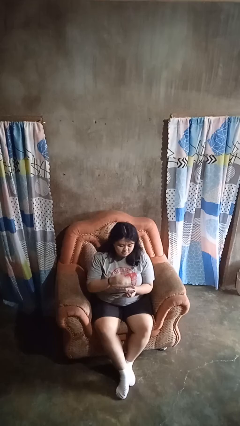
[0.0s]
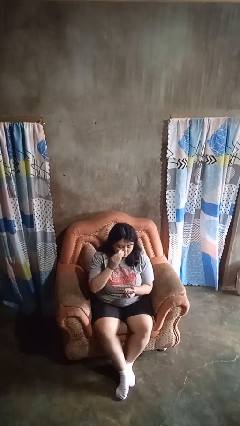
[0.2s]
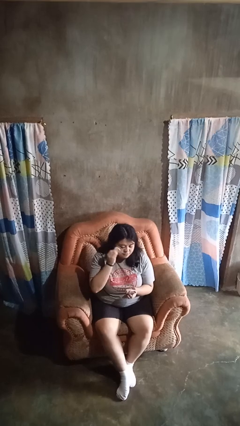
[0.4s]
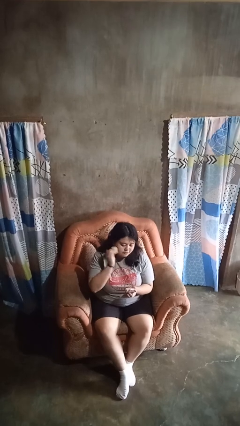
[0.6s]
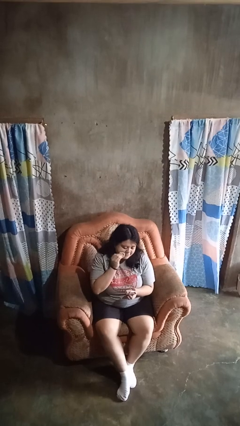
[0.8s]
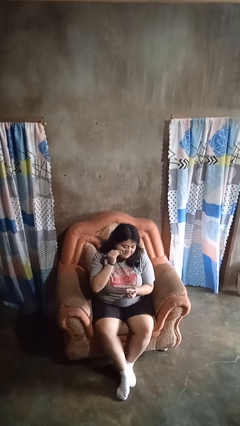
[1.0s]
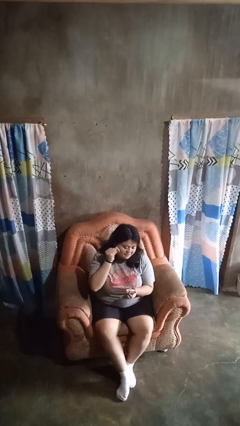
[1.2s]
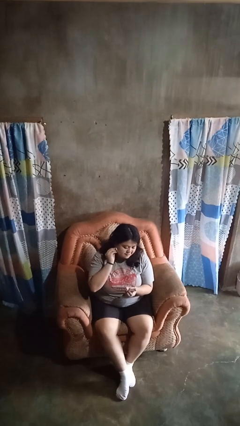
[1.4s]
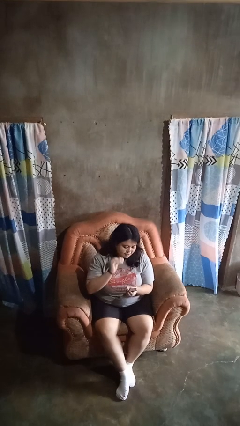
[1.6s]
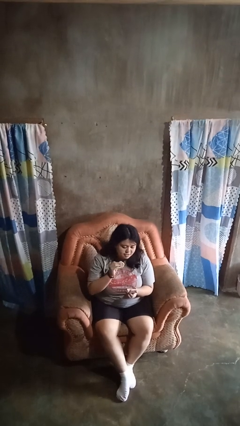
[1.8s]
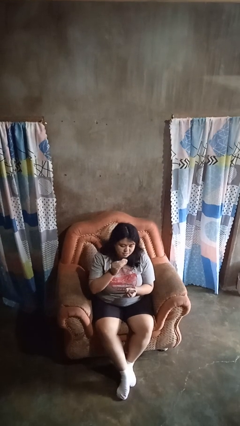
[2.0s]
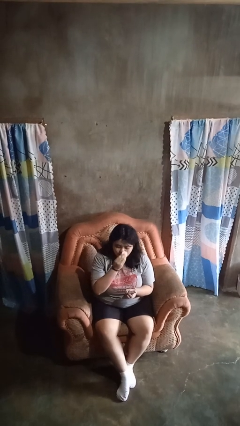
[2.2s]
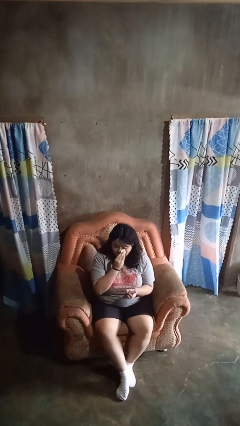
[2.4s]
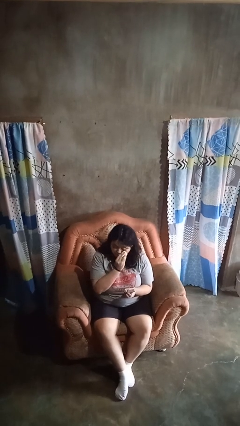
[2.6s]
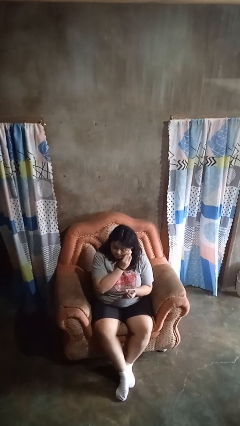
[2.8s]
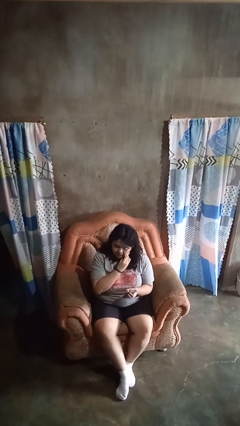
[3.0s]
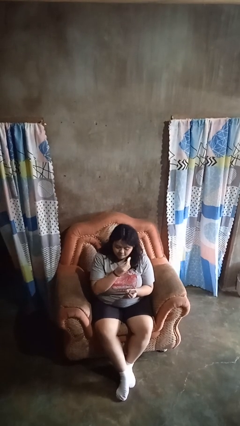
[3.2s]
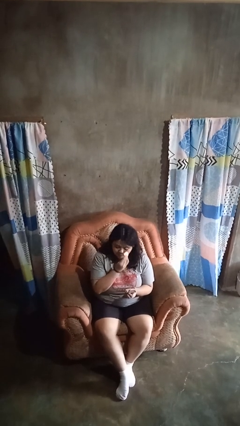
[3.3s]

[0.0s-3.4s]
person applies foundation makeup

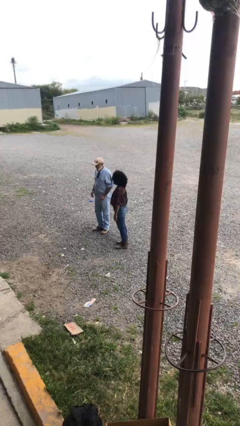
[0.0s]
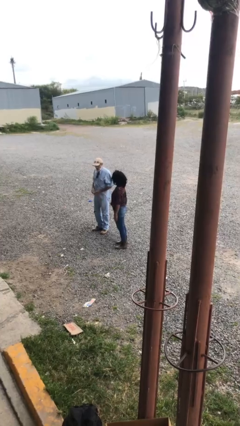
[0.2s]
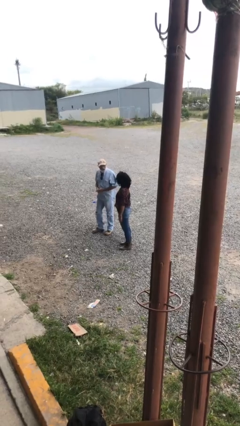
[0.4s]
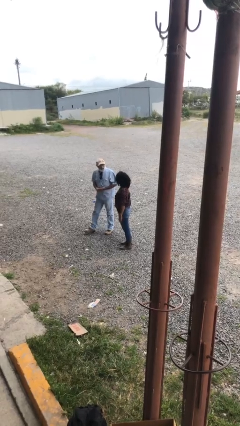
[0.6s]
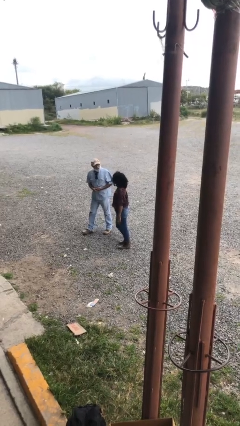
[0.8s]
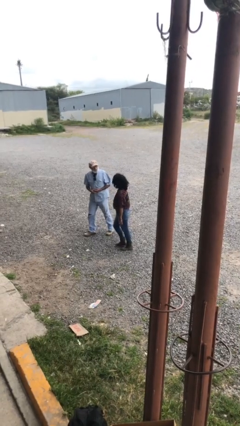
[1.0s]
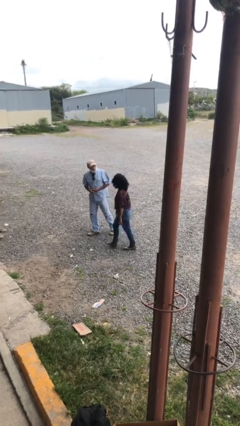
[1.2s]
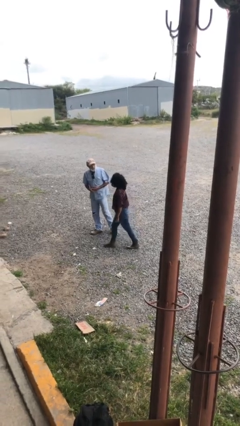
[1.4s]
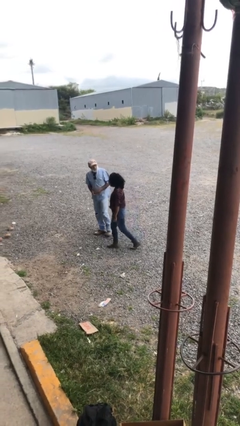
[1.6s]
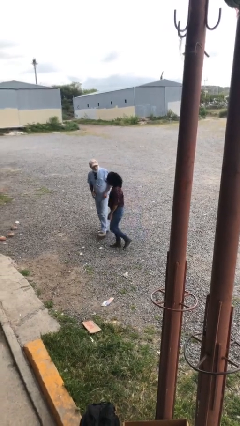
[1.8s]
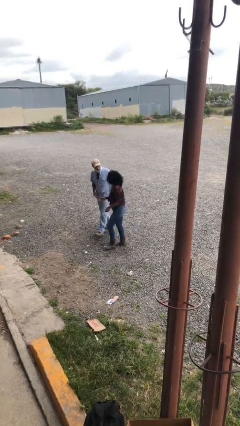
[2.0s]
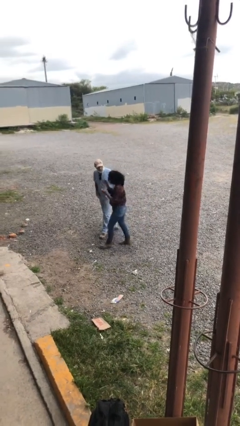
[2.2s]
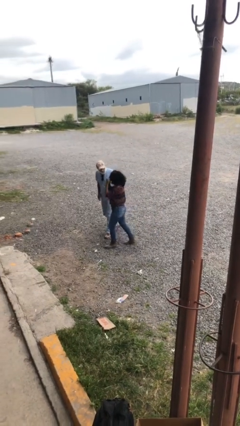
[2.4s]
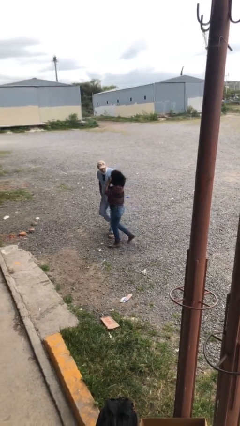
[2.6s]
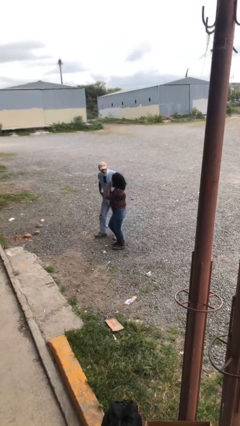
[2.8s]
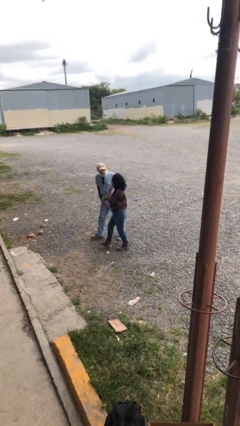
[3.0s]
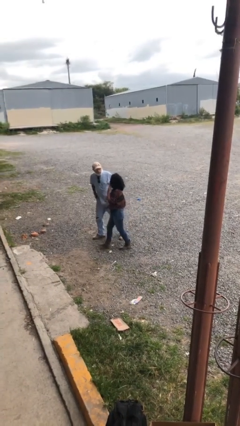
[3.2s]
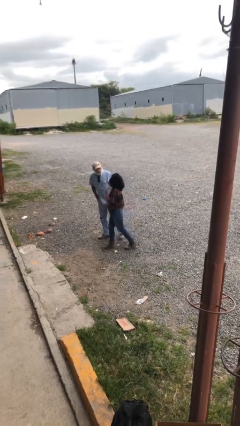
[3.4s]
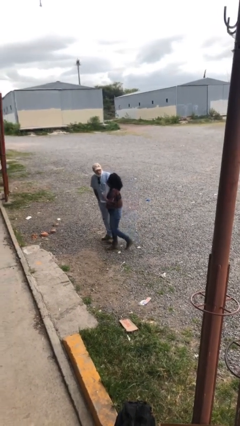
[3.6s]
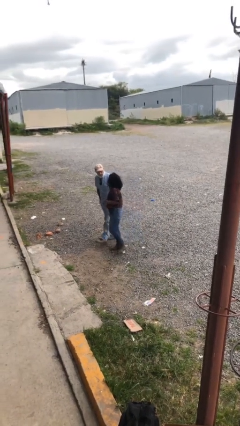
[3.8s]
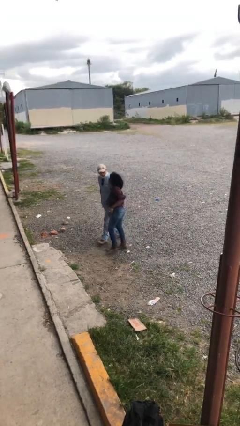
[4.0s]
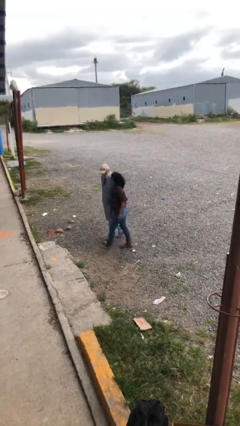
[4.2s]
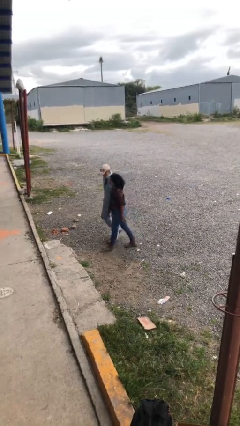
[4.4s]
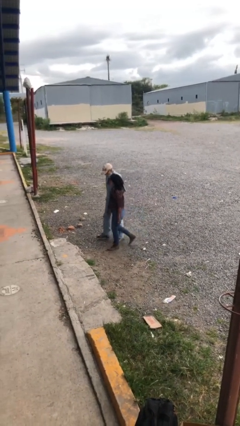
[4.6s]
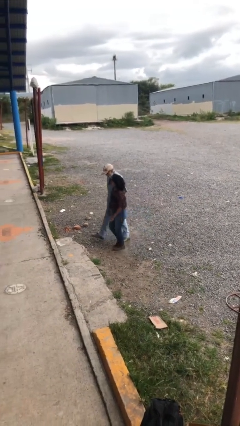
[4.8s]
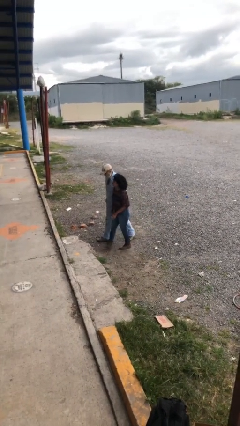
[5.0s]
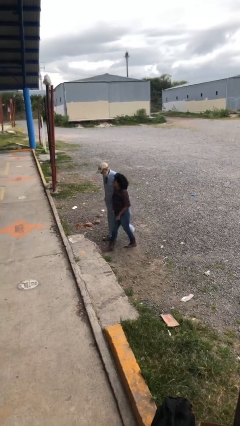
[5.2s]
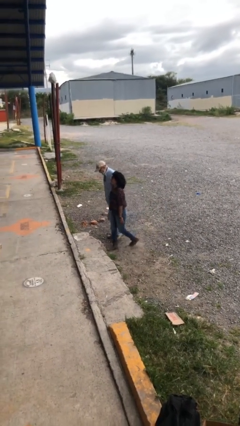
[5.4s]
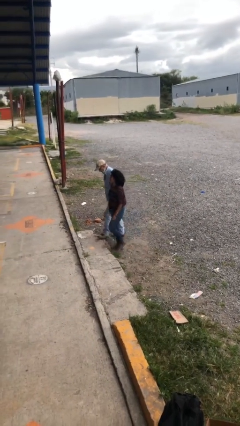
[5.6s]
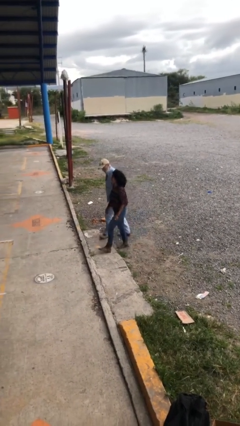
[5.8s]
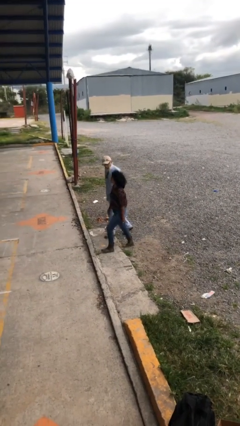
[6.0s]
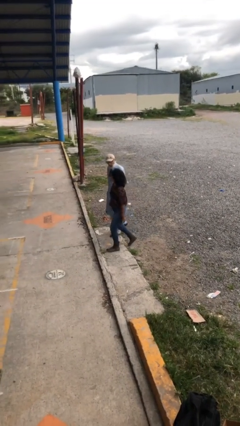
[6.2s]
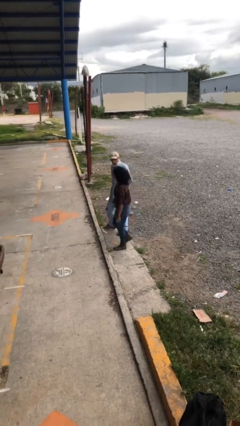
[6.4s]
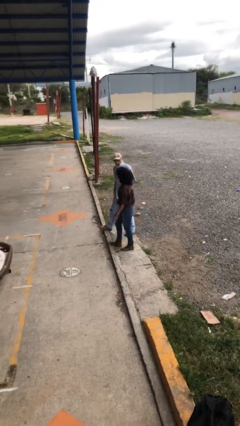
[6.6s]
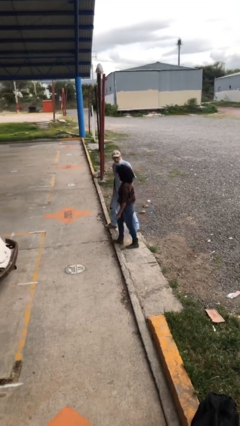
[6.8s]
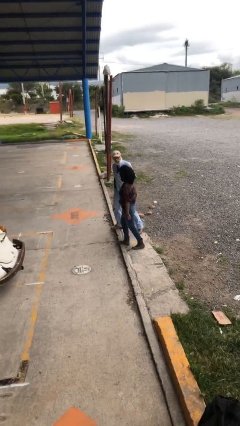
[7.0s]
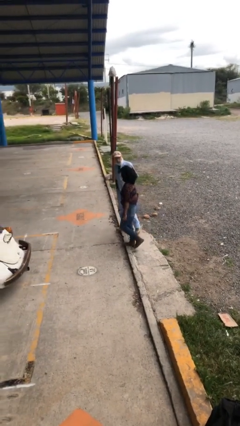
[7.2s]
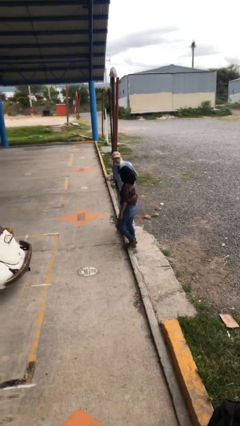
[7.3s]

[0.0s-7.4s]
person talks to person

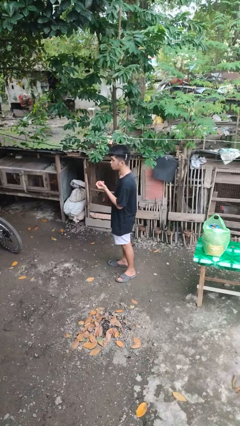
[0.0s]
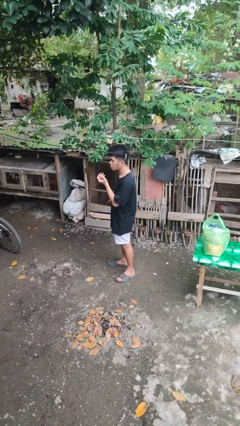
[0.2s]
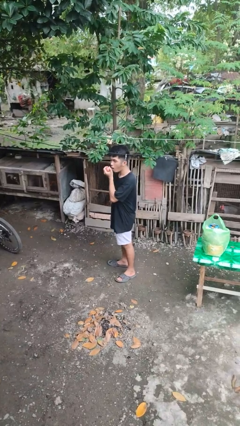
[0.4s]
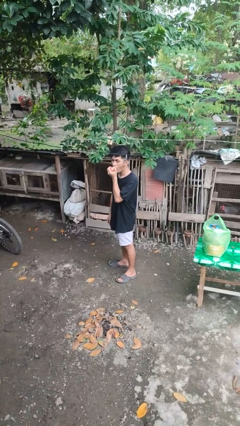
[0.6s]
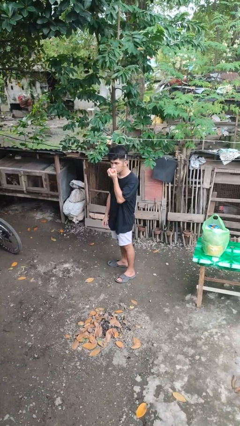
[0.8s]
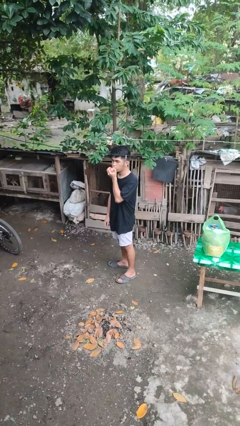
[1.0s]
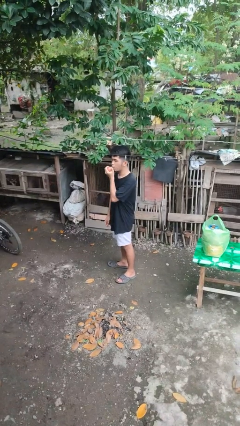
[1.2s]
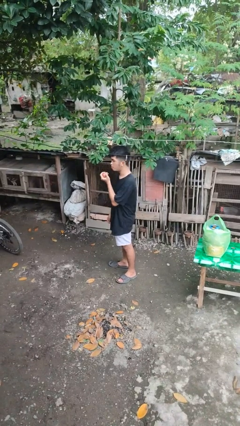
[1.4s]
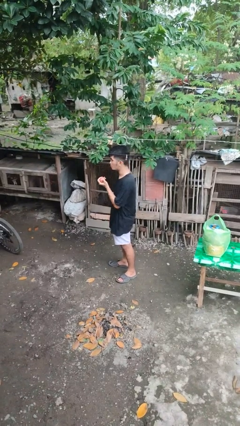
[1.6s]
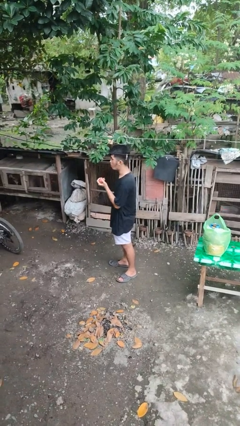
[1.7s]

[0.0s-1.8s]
person eats apple

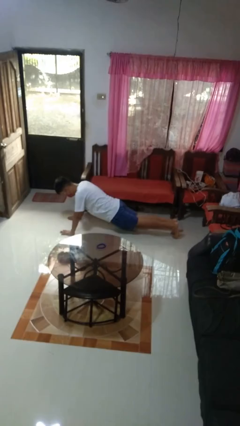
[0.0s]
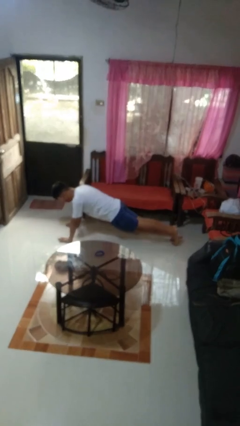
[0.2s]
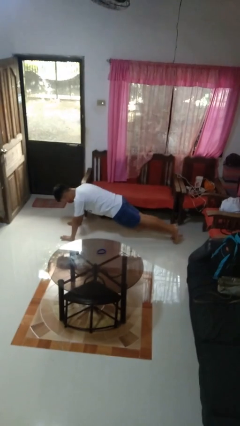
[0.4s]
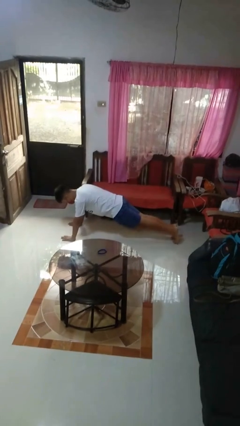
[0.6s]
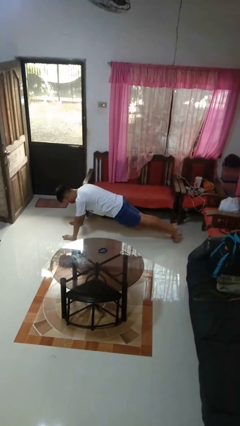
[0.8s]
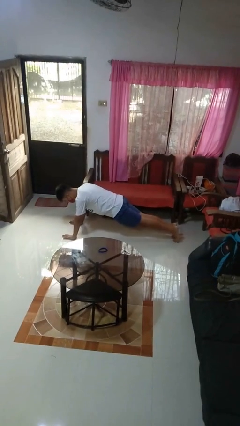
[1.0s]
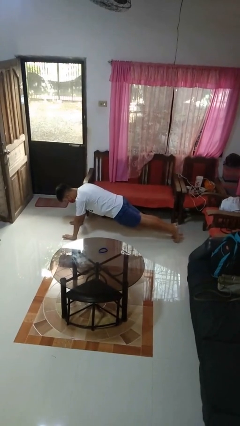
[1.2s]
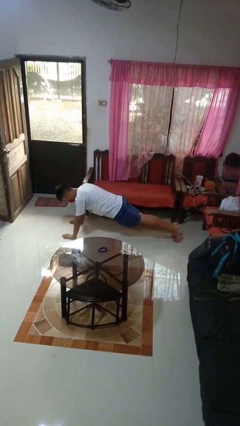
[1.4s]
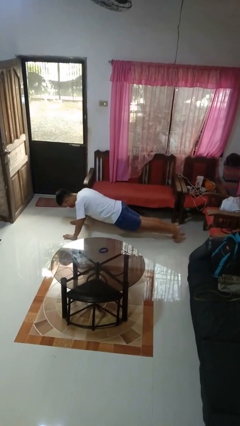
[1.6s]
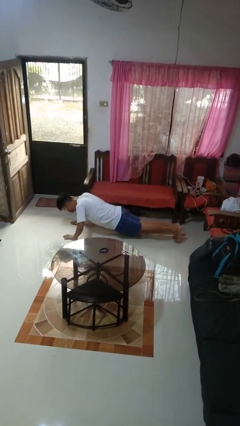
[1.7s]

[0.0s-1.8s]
person exercises with pushup

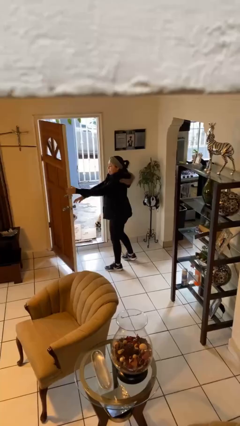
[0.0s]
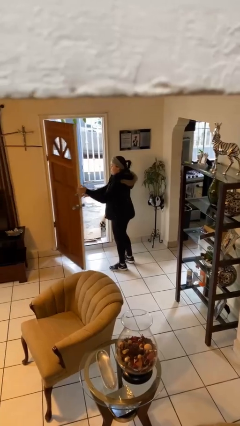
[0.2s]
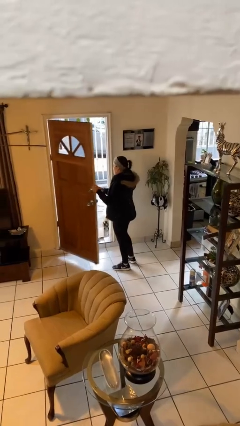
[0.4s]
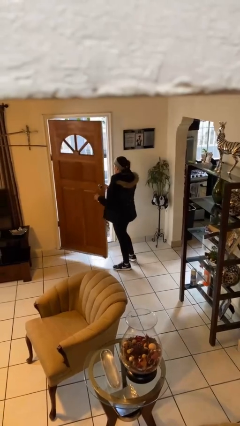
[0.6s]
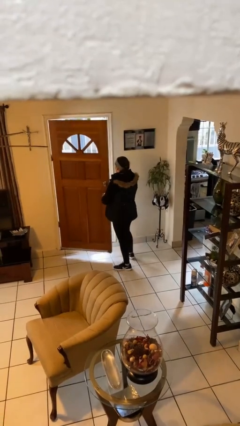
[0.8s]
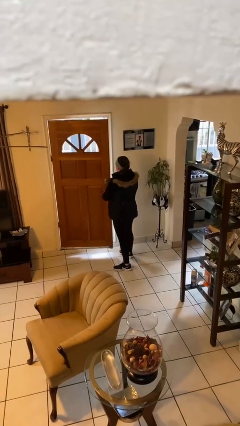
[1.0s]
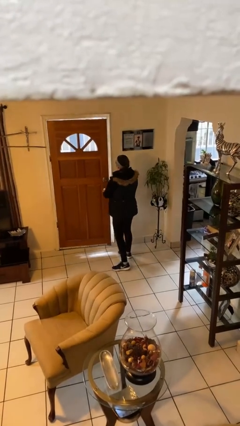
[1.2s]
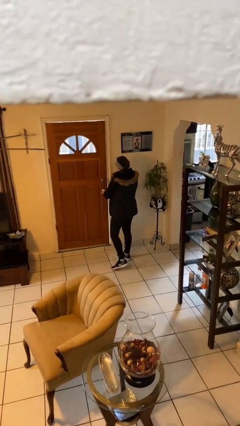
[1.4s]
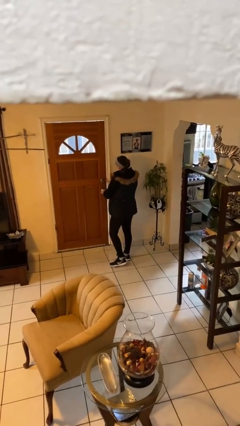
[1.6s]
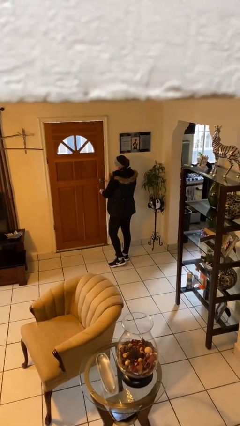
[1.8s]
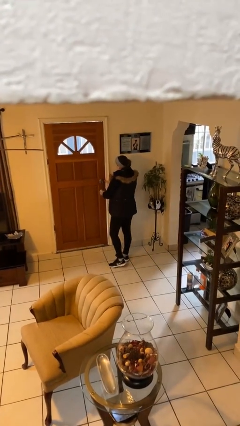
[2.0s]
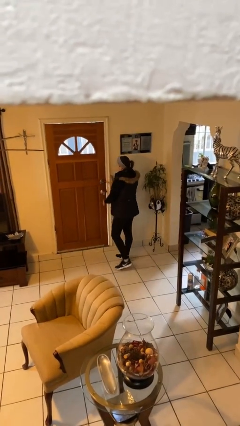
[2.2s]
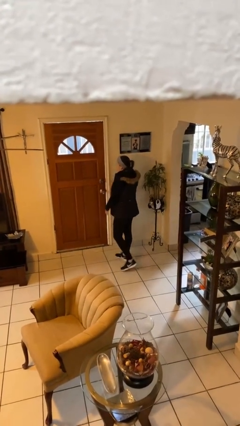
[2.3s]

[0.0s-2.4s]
person closes facility door

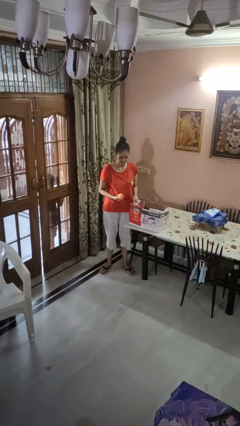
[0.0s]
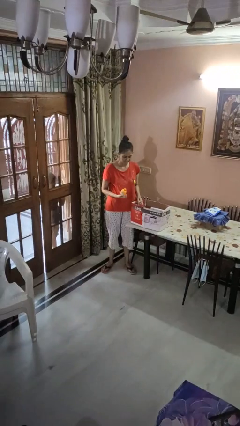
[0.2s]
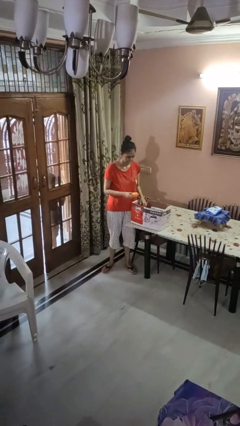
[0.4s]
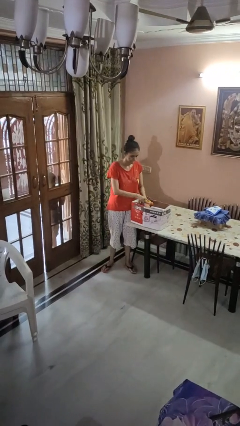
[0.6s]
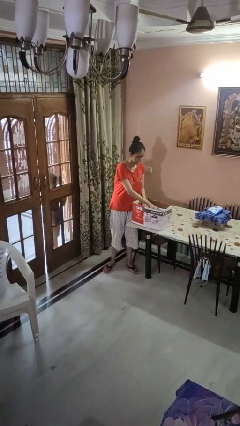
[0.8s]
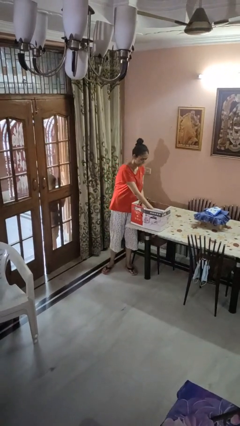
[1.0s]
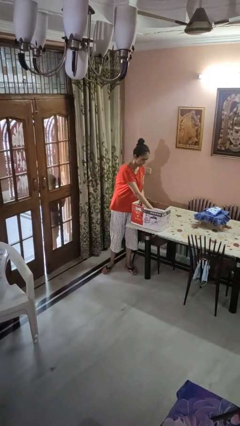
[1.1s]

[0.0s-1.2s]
person puts object into box
